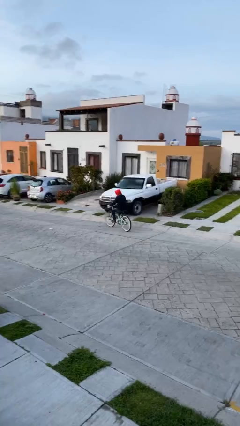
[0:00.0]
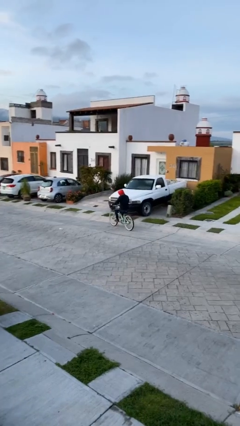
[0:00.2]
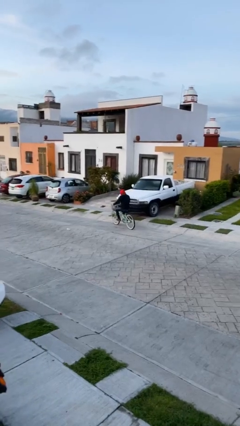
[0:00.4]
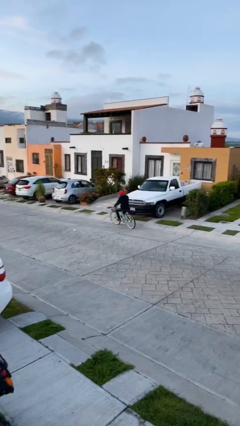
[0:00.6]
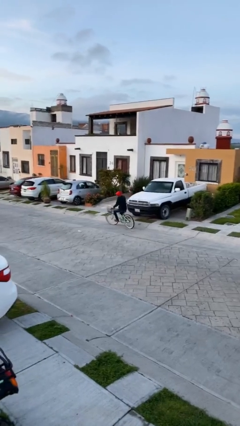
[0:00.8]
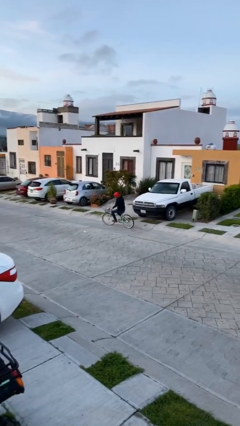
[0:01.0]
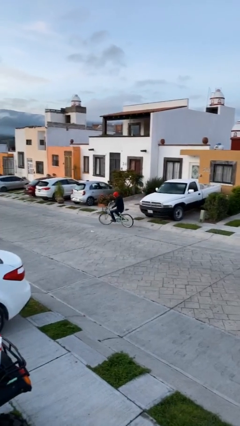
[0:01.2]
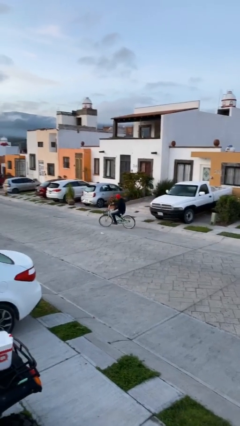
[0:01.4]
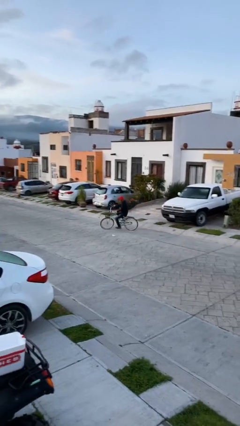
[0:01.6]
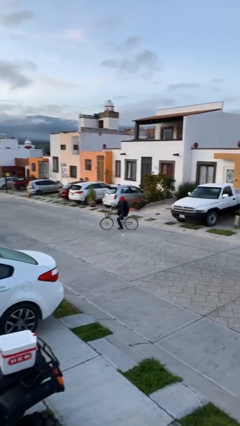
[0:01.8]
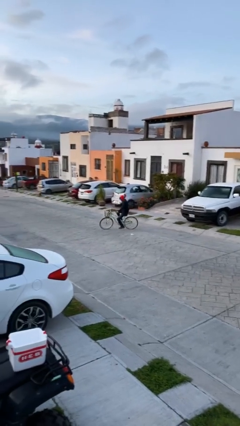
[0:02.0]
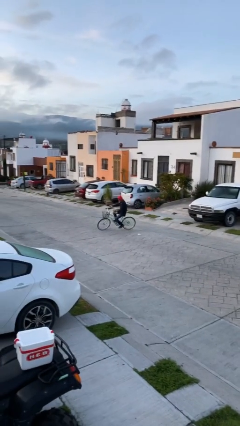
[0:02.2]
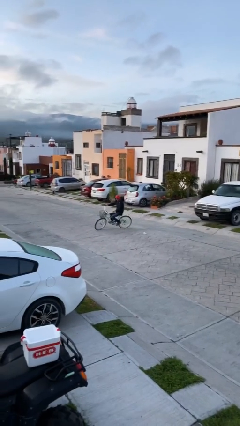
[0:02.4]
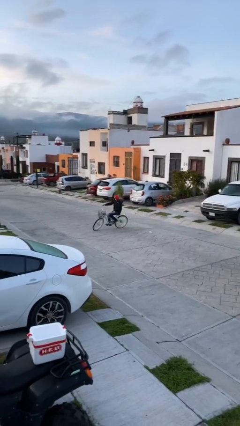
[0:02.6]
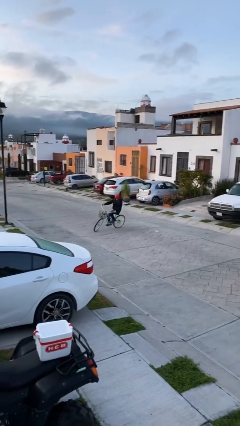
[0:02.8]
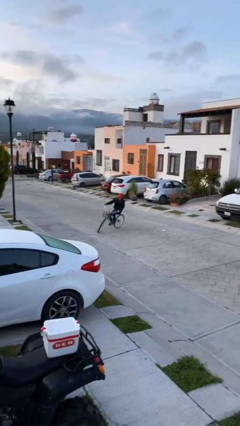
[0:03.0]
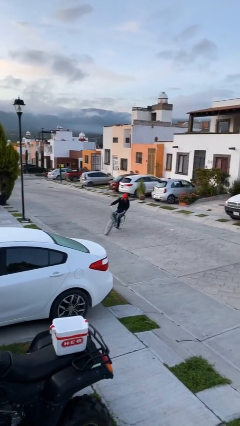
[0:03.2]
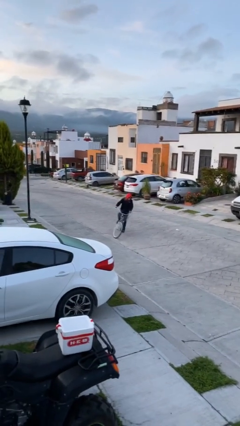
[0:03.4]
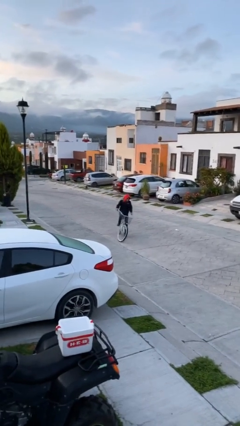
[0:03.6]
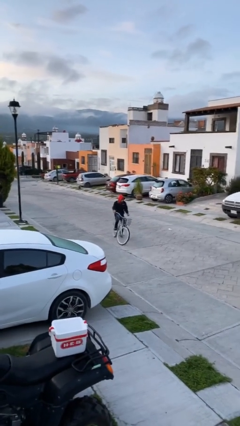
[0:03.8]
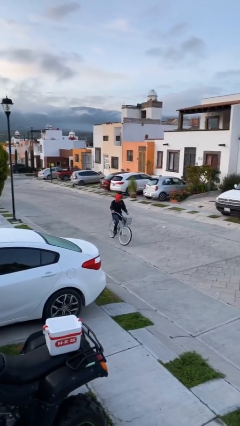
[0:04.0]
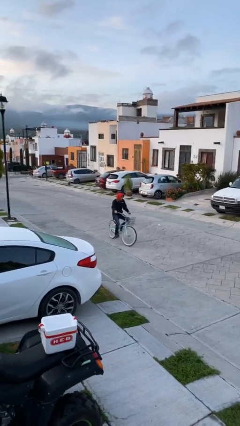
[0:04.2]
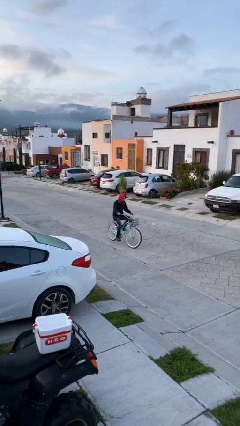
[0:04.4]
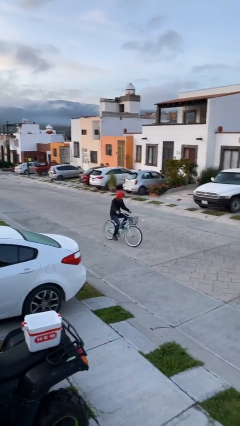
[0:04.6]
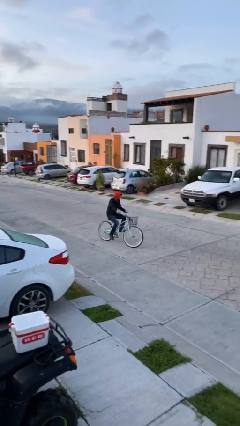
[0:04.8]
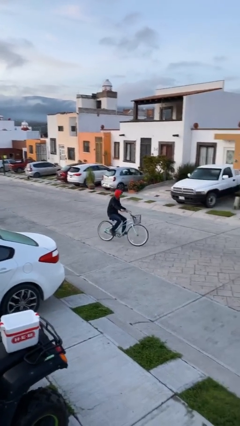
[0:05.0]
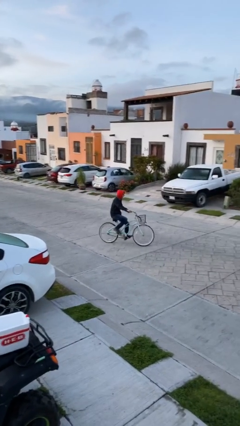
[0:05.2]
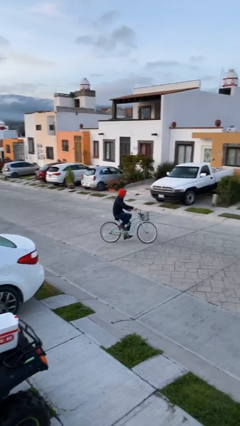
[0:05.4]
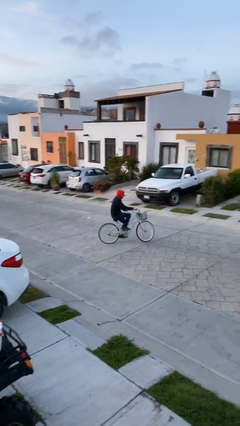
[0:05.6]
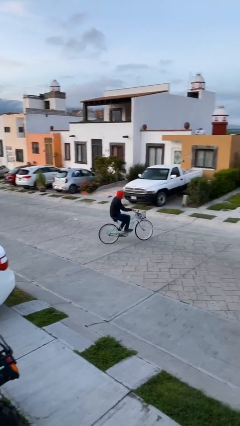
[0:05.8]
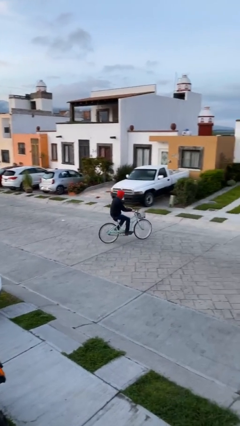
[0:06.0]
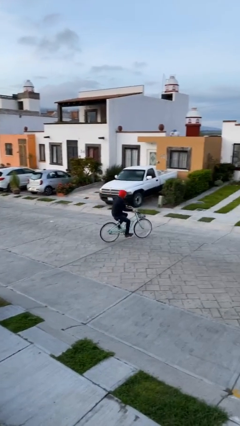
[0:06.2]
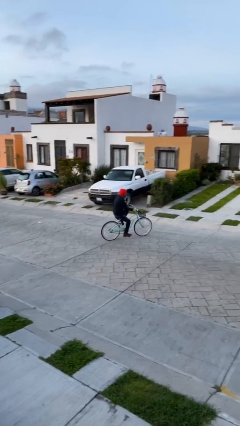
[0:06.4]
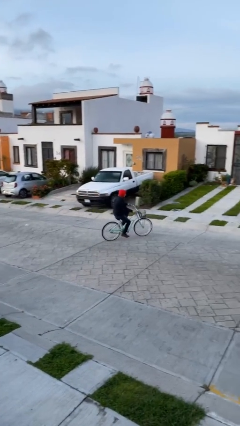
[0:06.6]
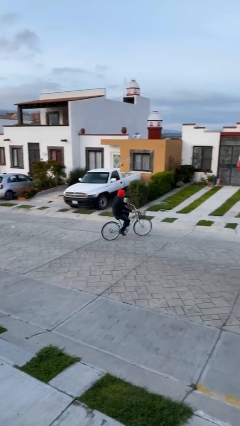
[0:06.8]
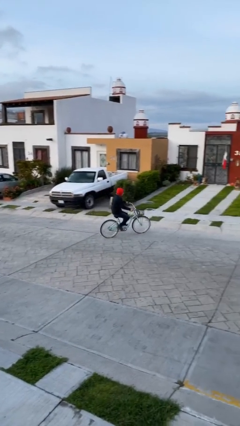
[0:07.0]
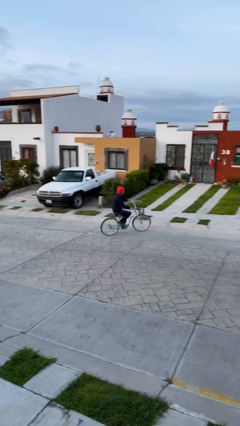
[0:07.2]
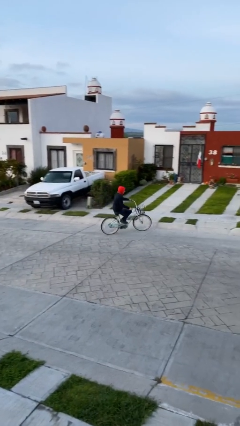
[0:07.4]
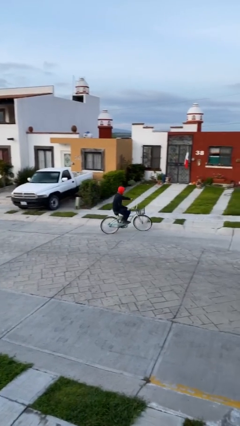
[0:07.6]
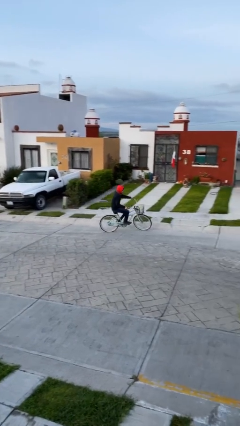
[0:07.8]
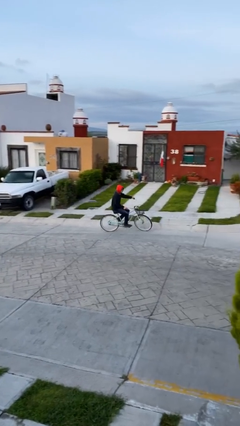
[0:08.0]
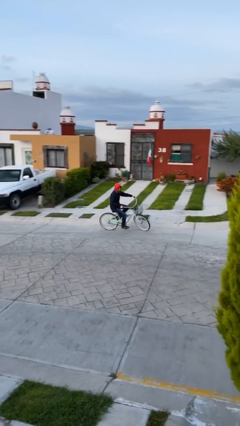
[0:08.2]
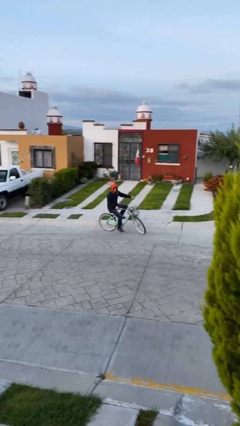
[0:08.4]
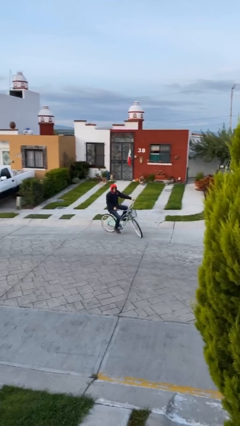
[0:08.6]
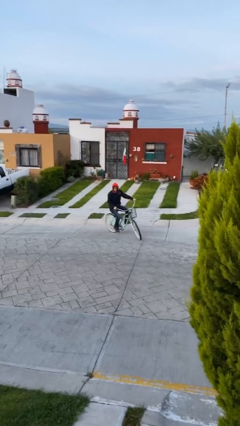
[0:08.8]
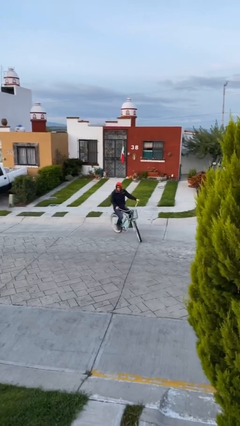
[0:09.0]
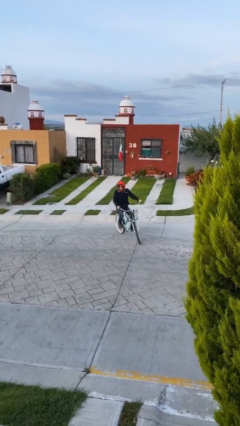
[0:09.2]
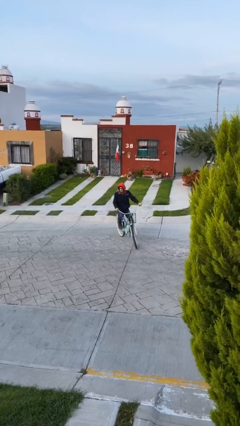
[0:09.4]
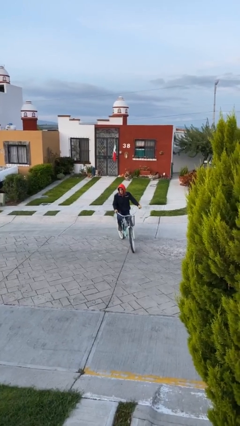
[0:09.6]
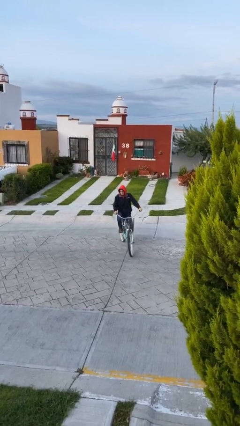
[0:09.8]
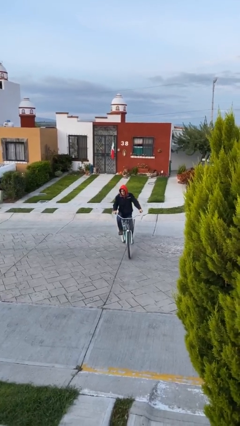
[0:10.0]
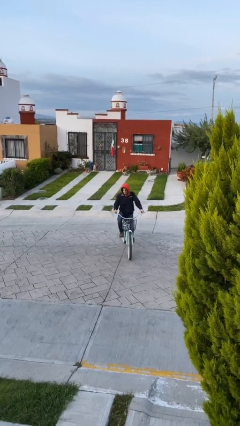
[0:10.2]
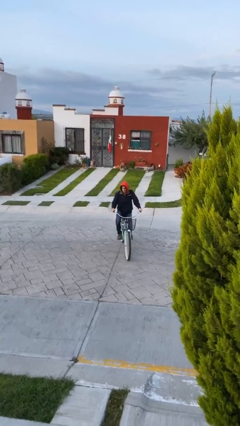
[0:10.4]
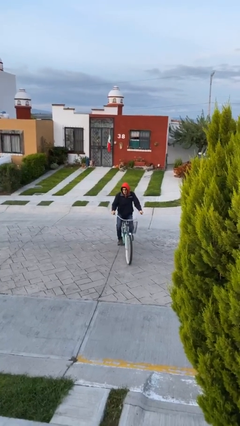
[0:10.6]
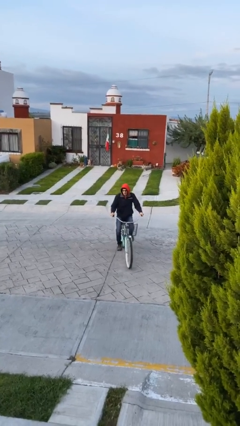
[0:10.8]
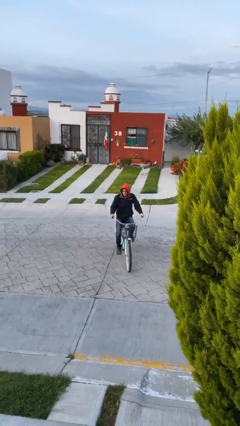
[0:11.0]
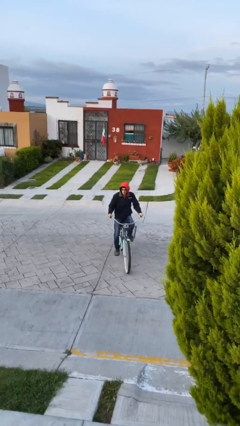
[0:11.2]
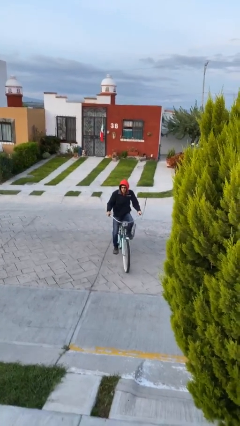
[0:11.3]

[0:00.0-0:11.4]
person rides bicycle

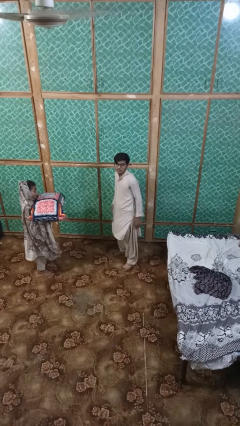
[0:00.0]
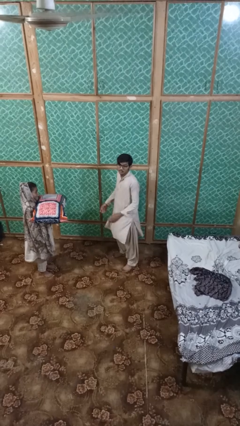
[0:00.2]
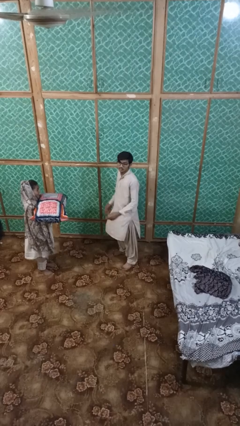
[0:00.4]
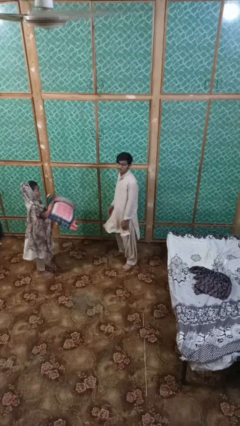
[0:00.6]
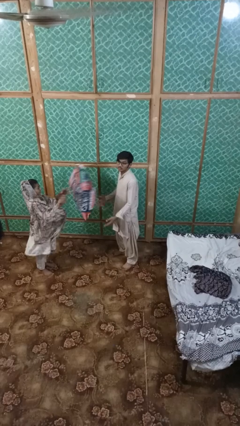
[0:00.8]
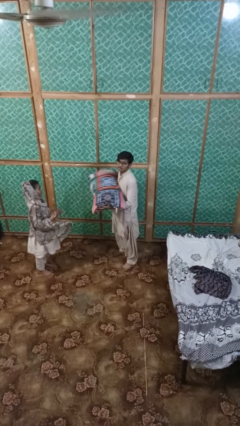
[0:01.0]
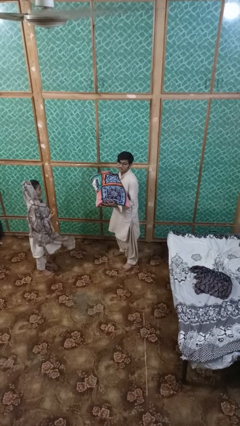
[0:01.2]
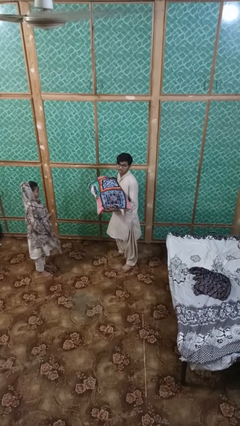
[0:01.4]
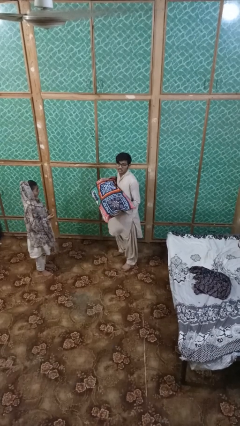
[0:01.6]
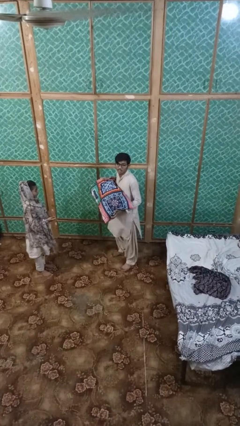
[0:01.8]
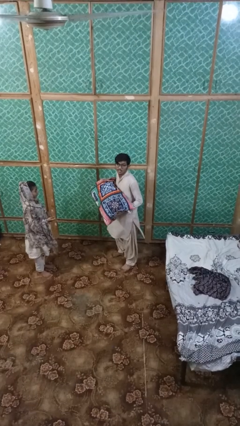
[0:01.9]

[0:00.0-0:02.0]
person catches object from person

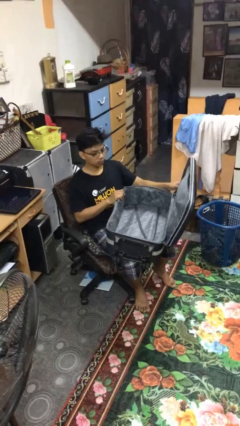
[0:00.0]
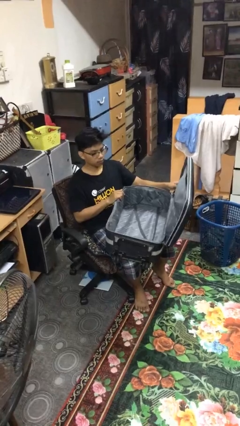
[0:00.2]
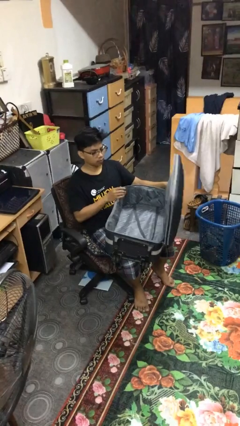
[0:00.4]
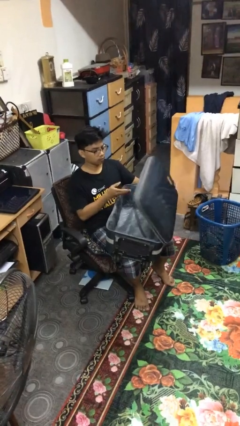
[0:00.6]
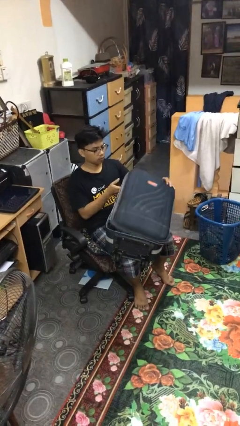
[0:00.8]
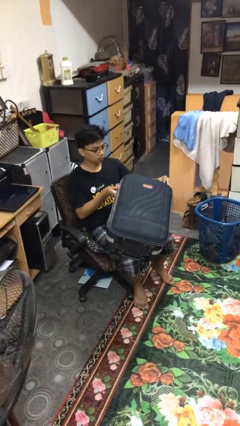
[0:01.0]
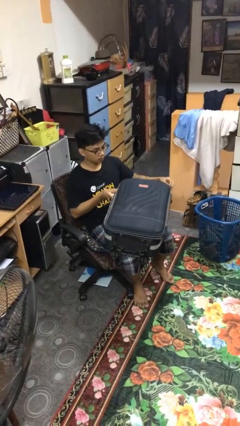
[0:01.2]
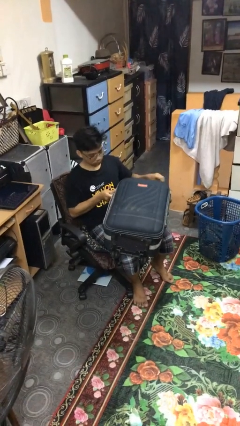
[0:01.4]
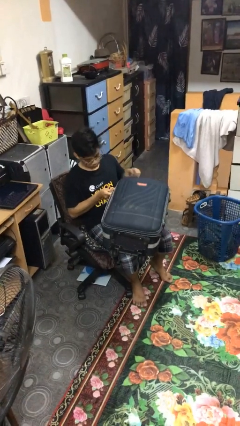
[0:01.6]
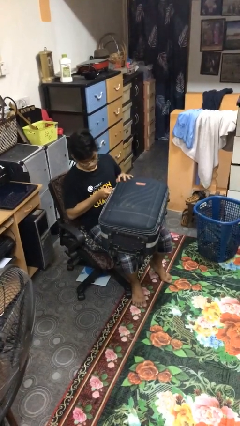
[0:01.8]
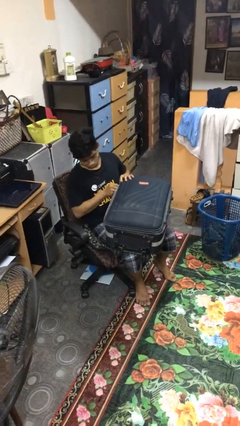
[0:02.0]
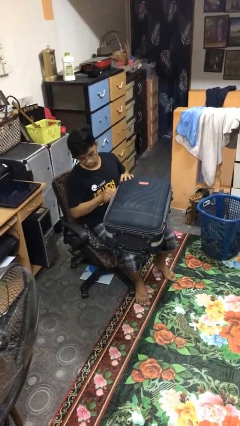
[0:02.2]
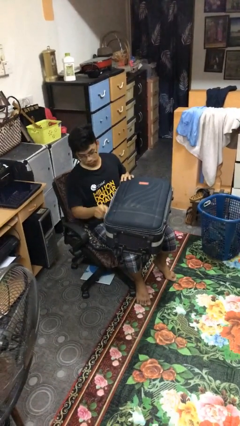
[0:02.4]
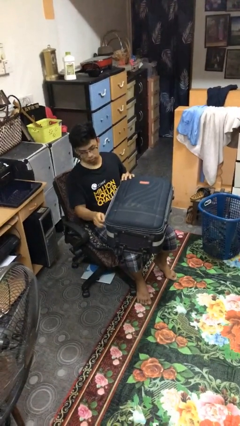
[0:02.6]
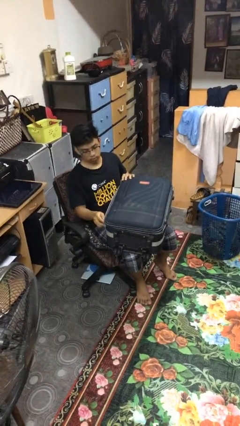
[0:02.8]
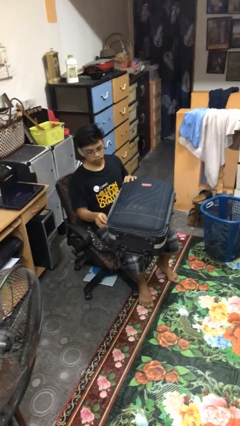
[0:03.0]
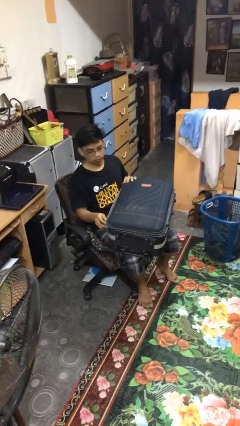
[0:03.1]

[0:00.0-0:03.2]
person closes suitcase

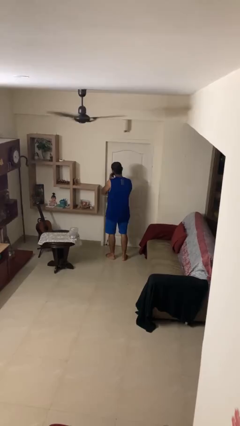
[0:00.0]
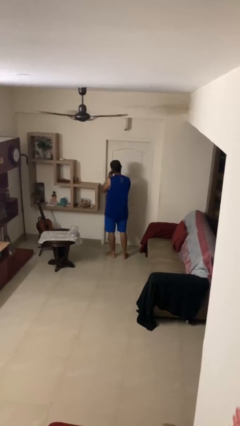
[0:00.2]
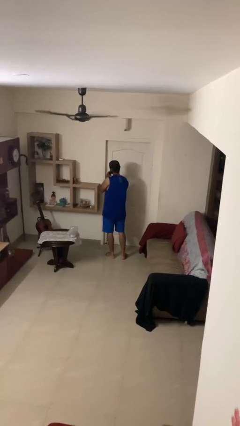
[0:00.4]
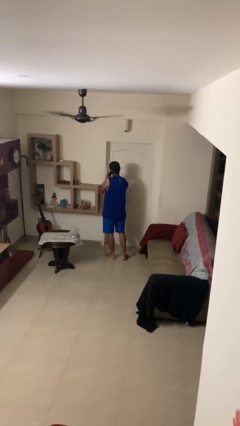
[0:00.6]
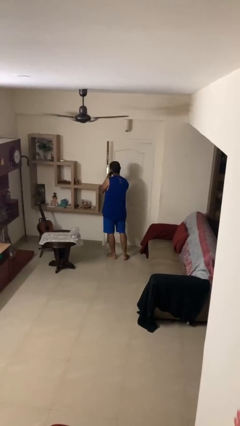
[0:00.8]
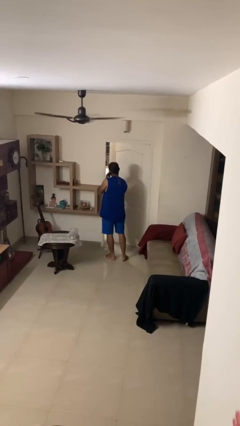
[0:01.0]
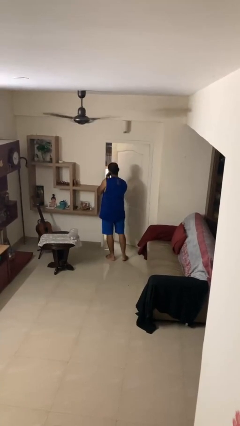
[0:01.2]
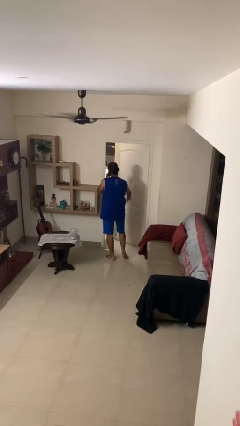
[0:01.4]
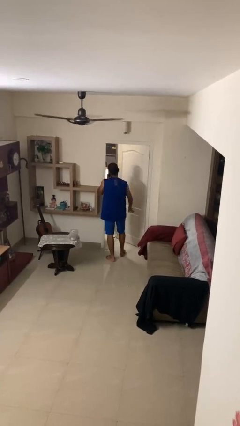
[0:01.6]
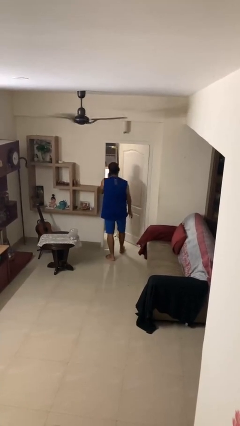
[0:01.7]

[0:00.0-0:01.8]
person opens facility door
